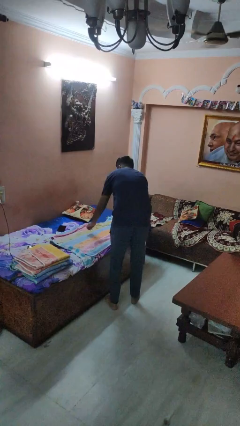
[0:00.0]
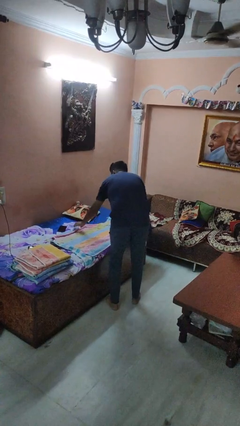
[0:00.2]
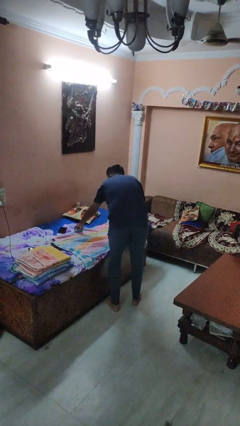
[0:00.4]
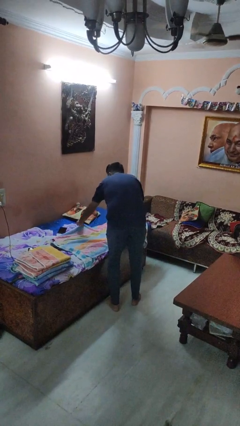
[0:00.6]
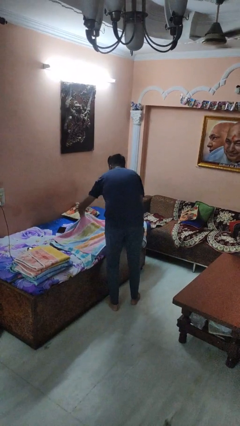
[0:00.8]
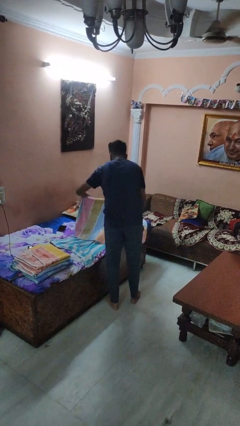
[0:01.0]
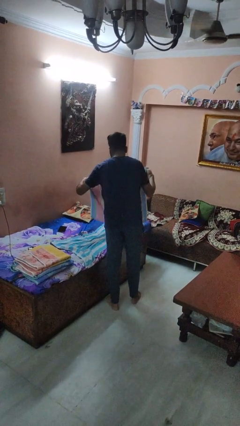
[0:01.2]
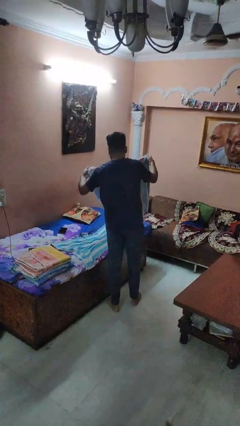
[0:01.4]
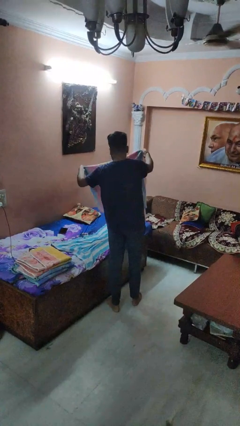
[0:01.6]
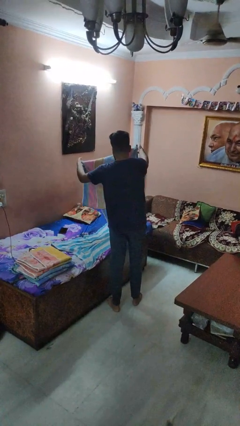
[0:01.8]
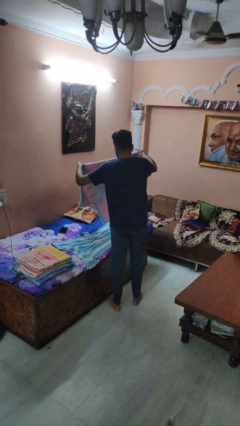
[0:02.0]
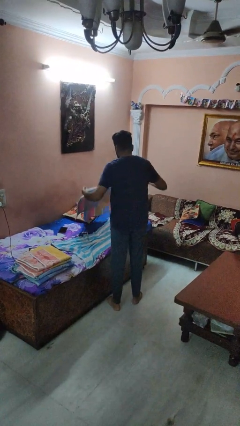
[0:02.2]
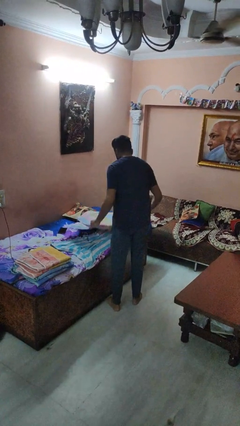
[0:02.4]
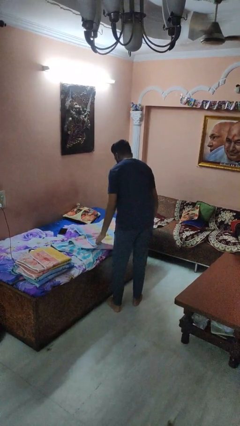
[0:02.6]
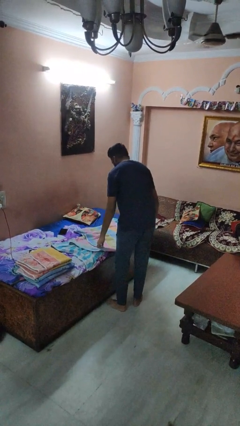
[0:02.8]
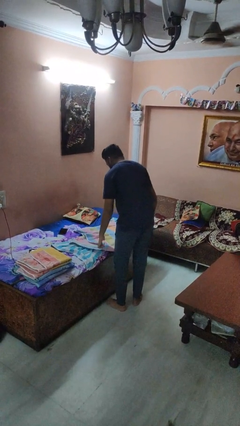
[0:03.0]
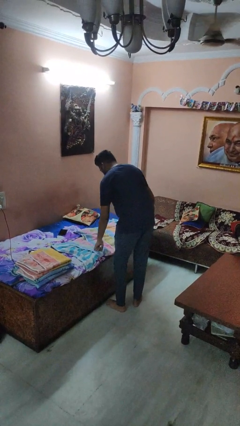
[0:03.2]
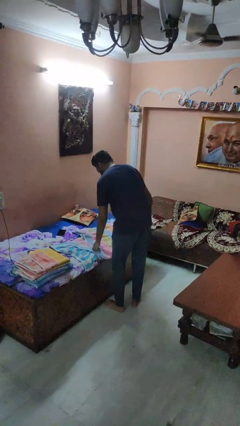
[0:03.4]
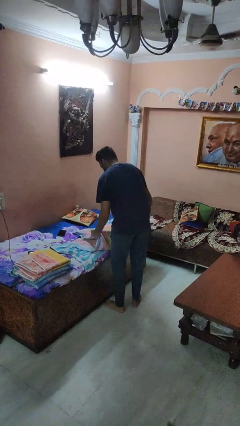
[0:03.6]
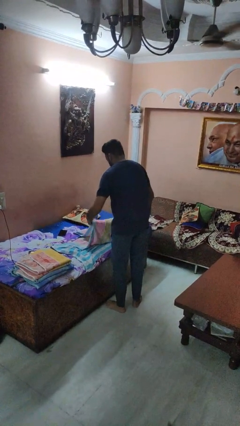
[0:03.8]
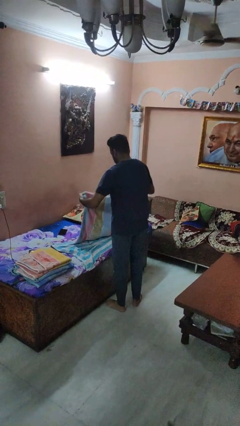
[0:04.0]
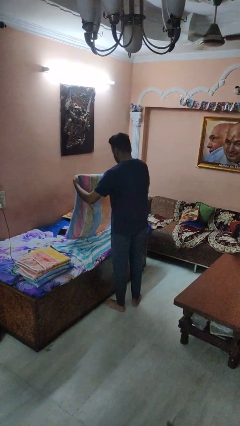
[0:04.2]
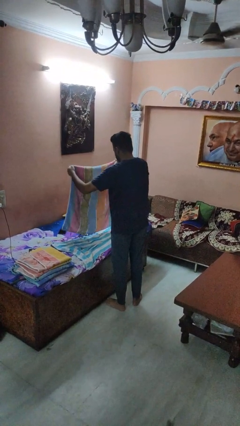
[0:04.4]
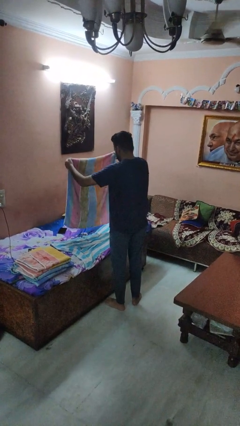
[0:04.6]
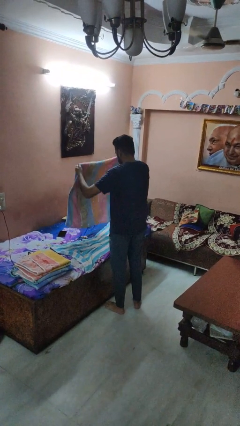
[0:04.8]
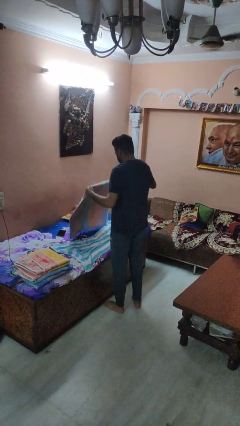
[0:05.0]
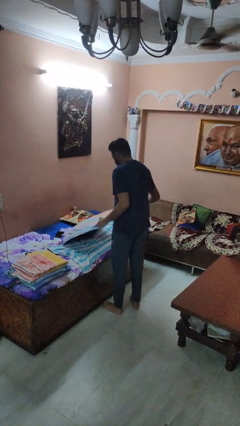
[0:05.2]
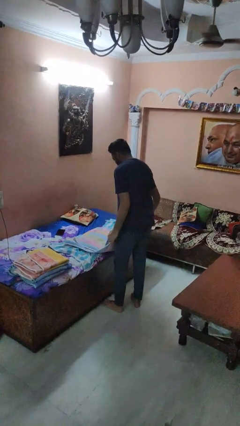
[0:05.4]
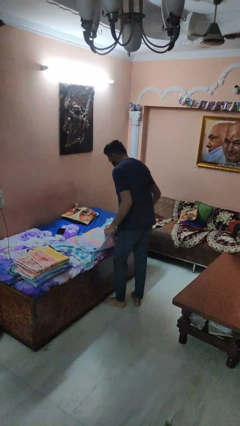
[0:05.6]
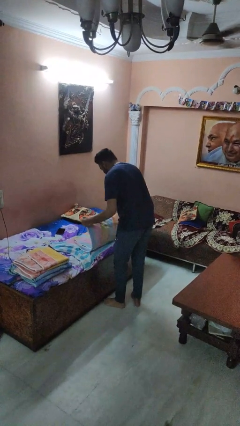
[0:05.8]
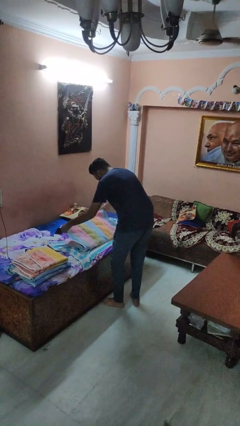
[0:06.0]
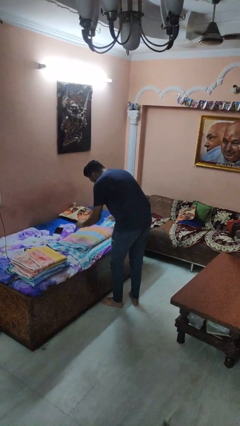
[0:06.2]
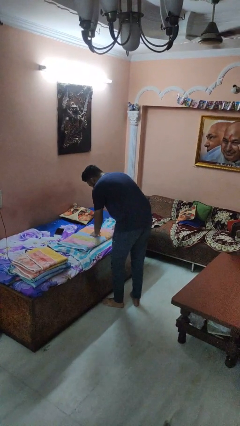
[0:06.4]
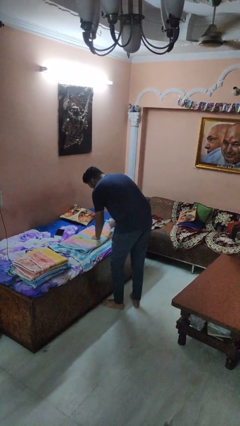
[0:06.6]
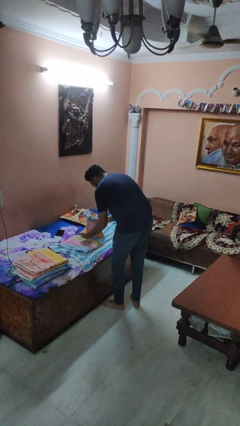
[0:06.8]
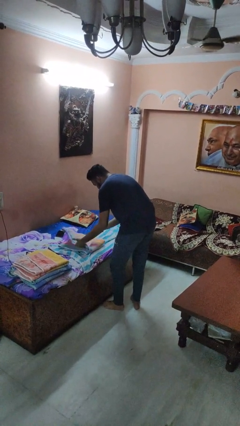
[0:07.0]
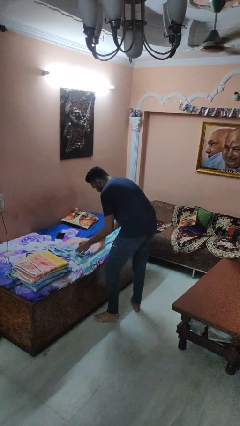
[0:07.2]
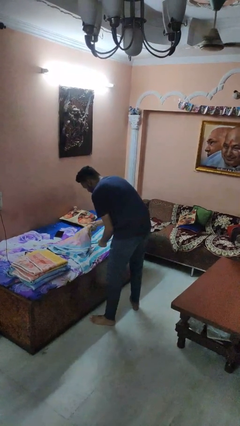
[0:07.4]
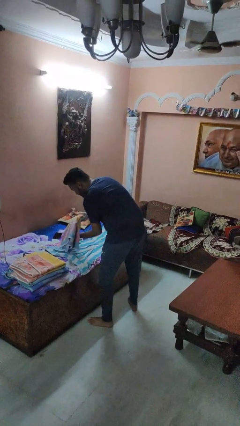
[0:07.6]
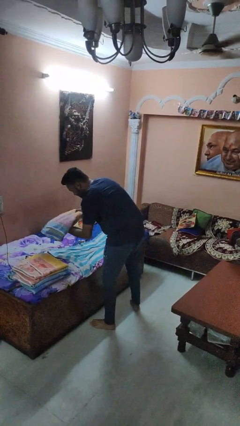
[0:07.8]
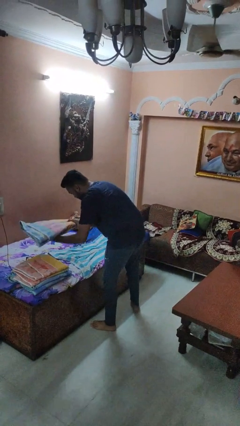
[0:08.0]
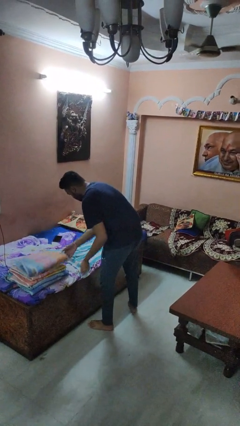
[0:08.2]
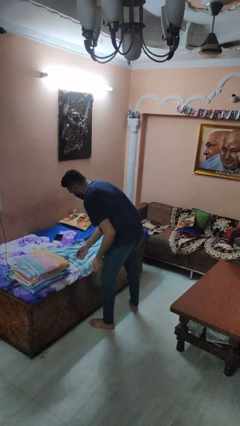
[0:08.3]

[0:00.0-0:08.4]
person folds towel

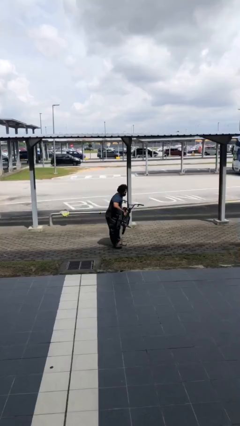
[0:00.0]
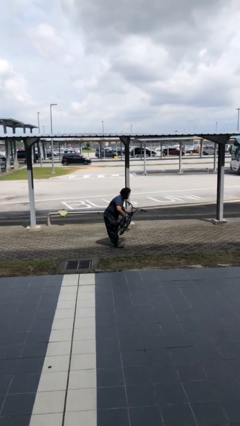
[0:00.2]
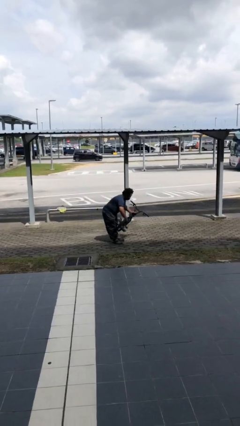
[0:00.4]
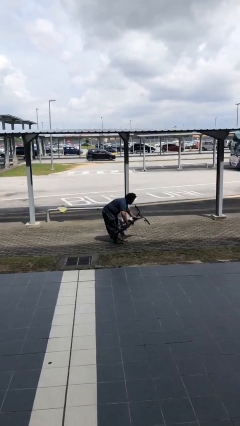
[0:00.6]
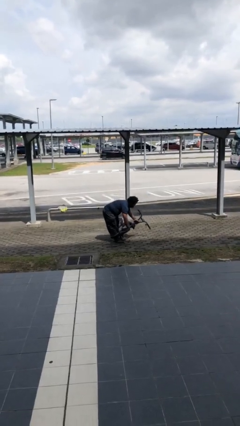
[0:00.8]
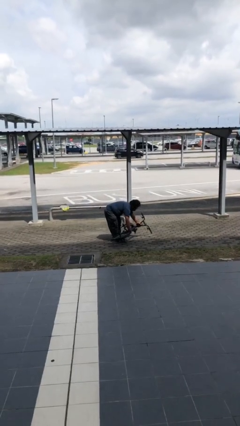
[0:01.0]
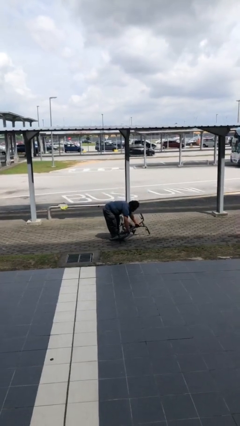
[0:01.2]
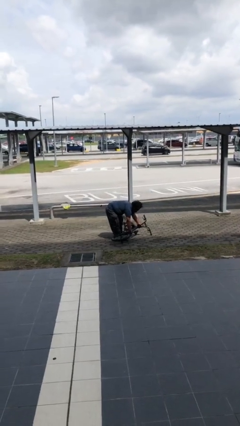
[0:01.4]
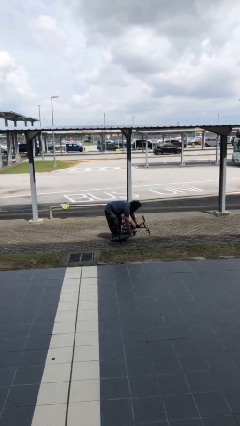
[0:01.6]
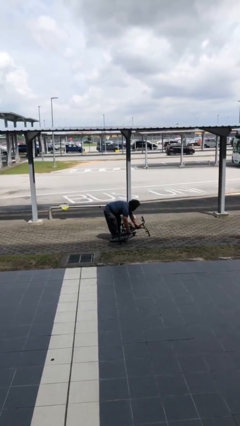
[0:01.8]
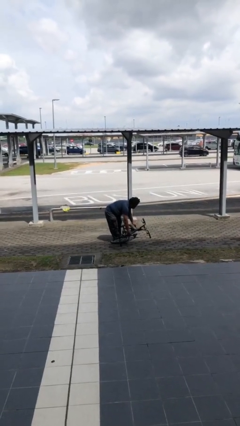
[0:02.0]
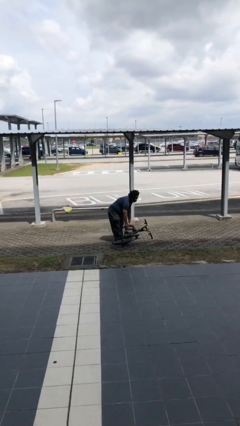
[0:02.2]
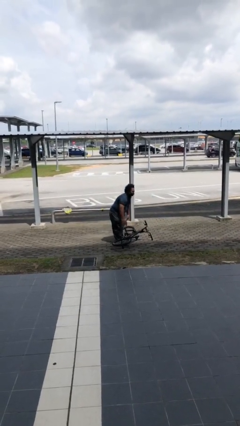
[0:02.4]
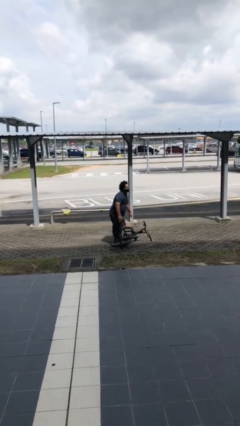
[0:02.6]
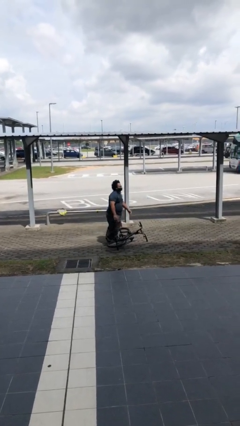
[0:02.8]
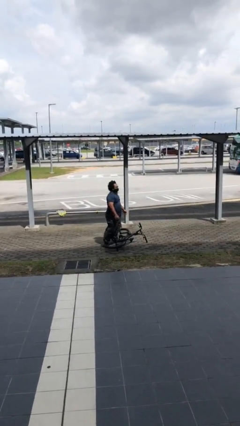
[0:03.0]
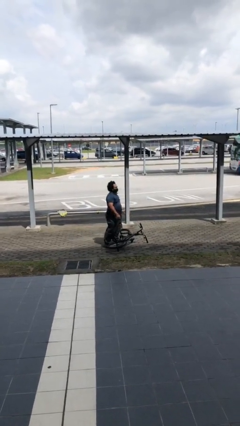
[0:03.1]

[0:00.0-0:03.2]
person puts down object on floor

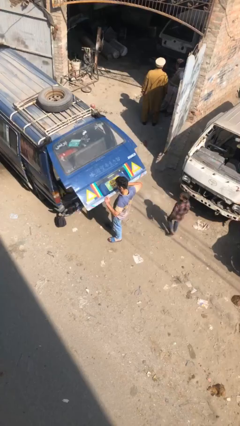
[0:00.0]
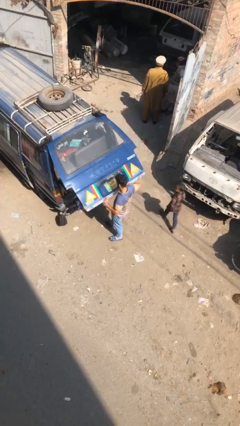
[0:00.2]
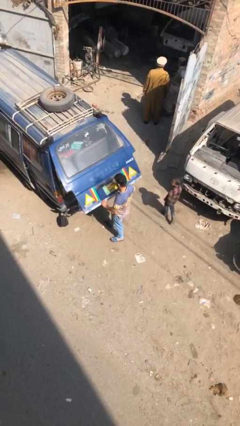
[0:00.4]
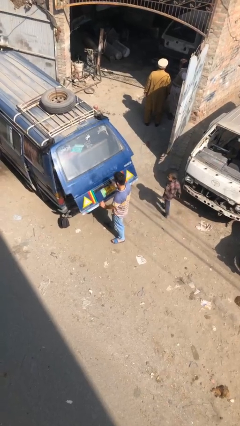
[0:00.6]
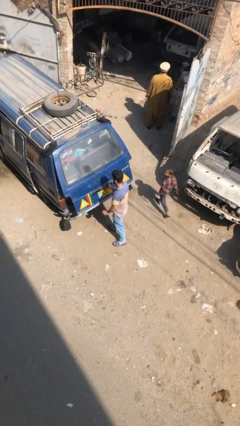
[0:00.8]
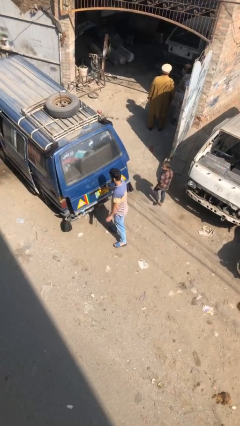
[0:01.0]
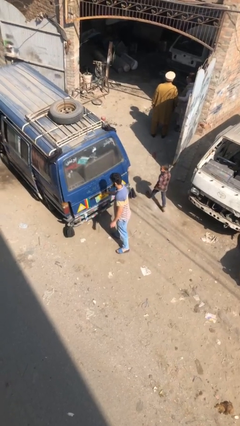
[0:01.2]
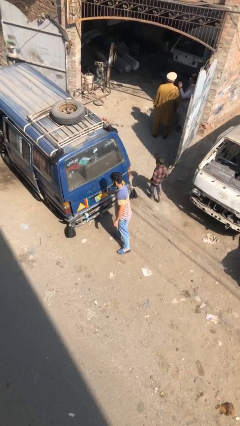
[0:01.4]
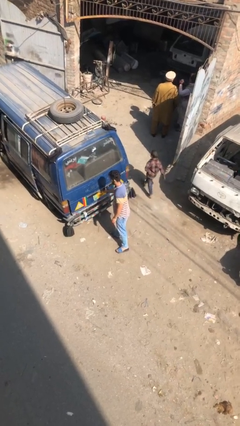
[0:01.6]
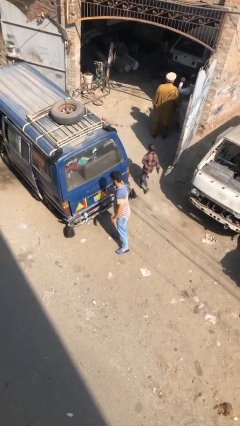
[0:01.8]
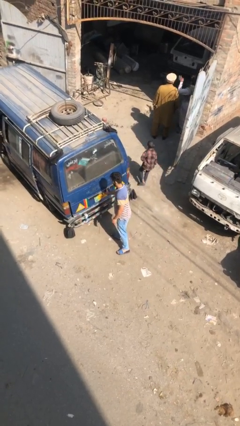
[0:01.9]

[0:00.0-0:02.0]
person closes car trunk

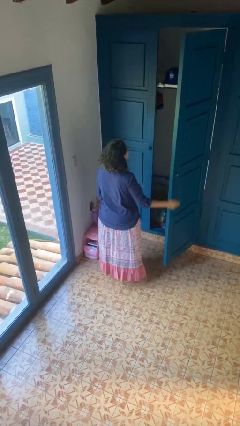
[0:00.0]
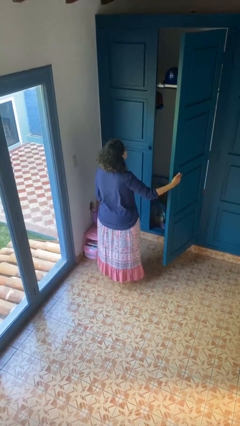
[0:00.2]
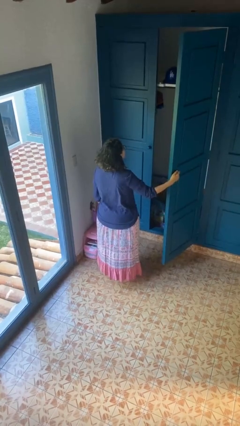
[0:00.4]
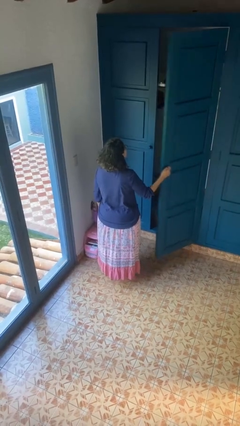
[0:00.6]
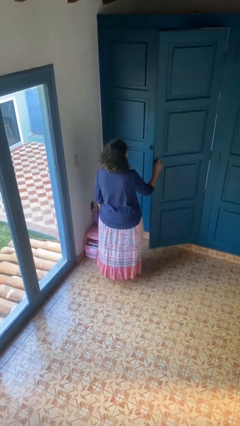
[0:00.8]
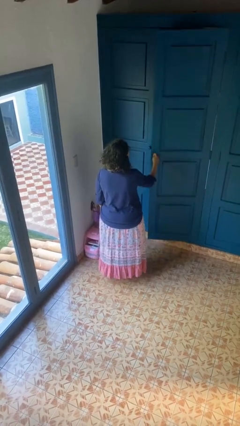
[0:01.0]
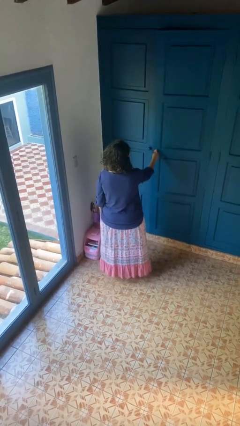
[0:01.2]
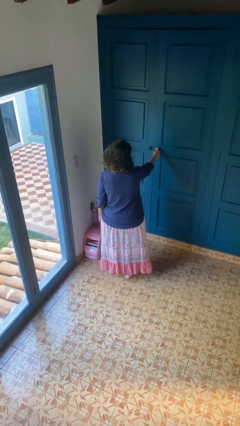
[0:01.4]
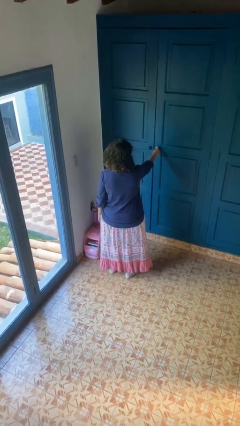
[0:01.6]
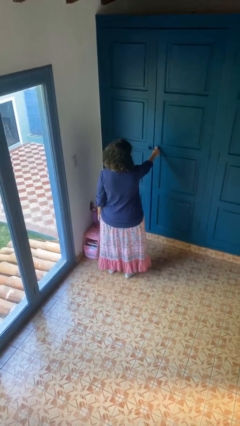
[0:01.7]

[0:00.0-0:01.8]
person closes closet door

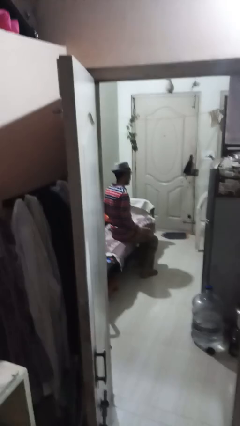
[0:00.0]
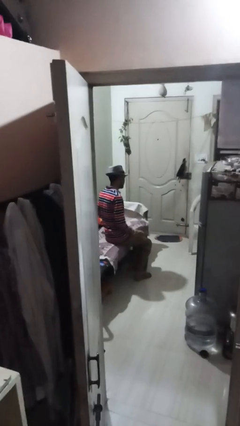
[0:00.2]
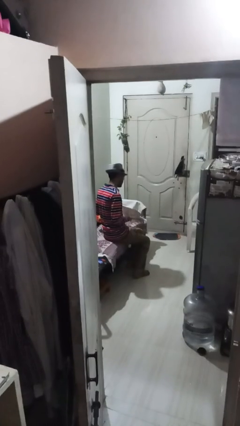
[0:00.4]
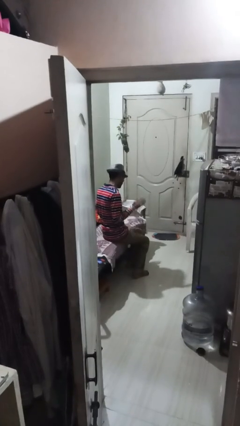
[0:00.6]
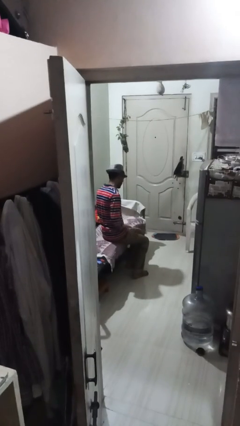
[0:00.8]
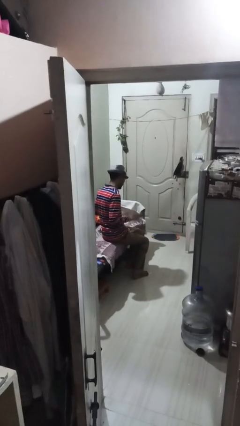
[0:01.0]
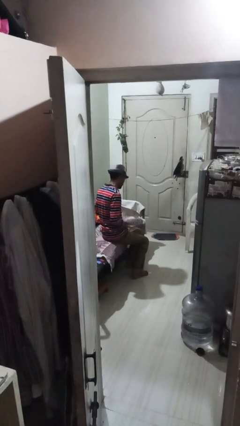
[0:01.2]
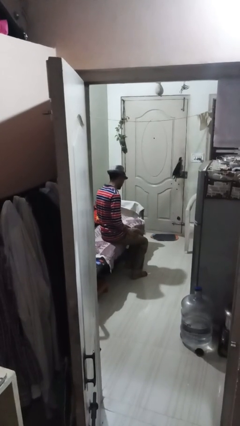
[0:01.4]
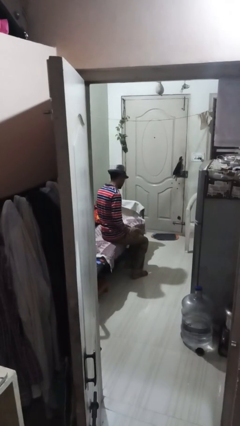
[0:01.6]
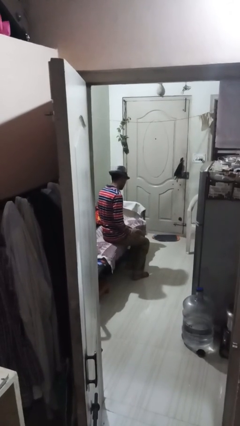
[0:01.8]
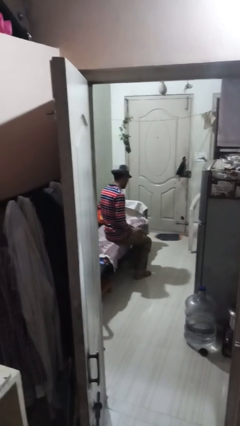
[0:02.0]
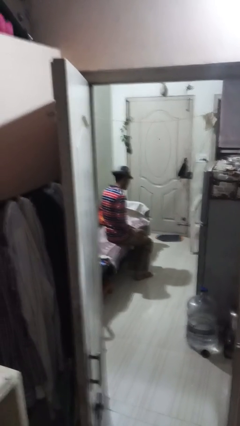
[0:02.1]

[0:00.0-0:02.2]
person slaps hands on thighs
